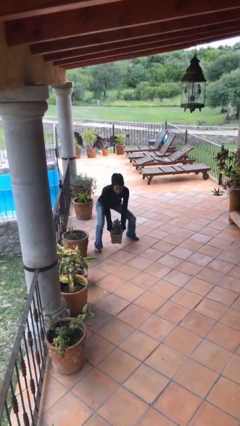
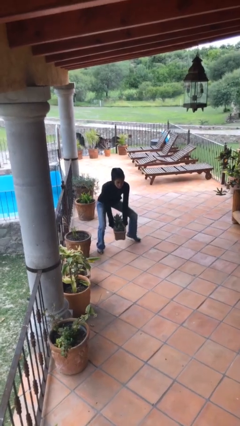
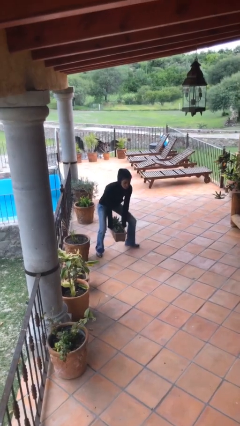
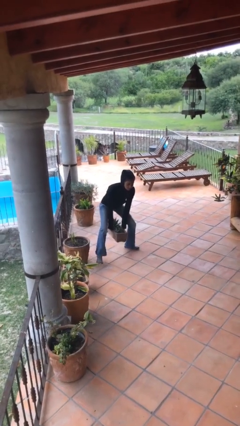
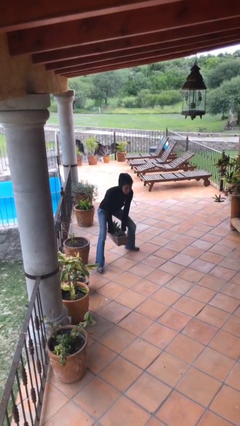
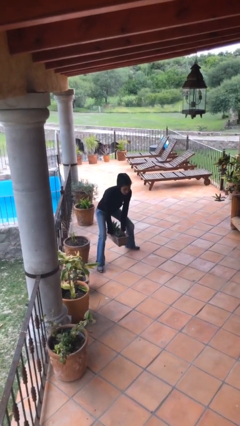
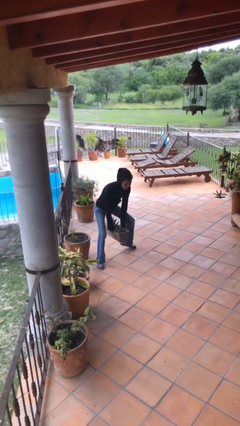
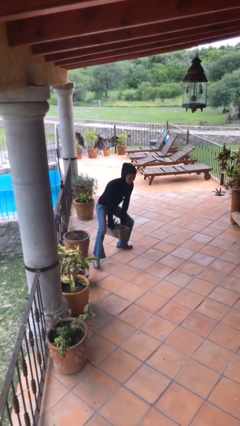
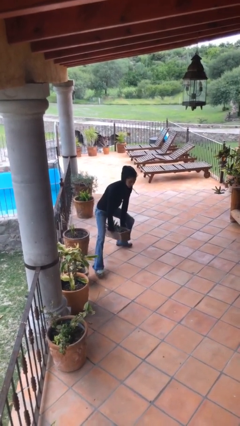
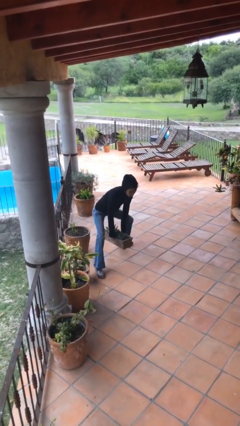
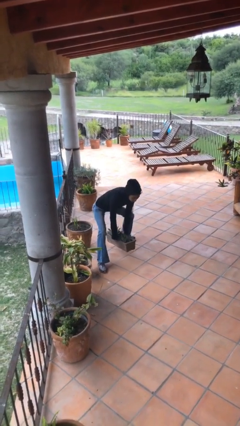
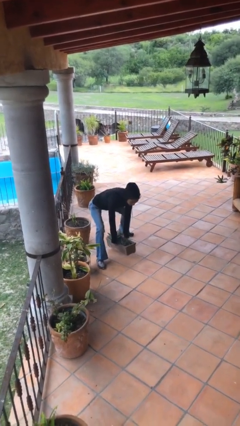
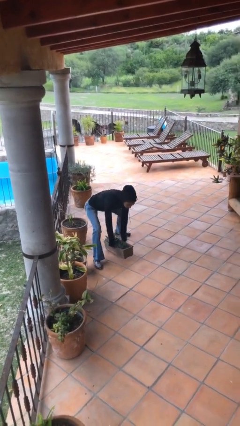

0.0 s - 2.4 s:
person carries heavy object

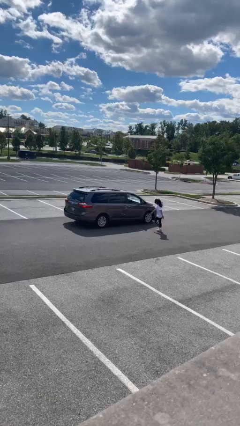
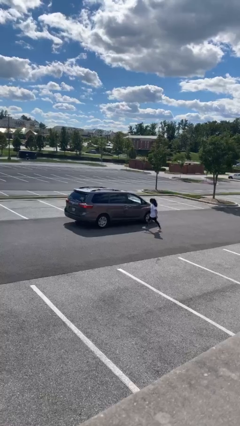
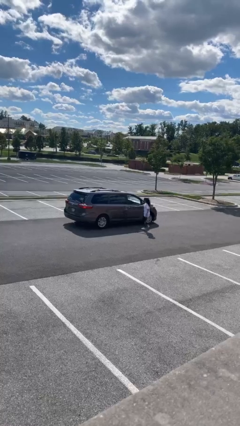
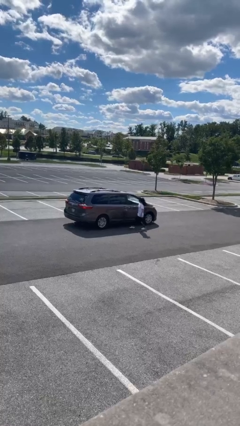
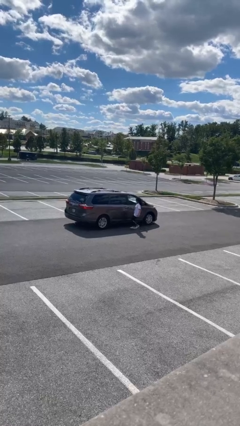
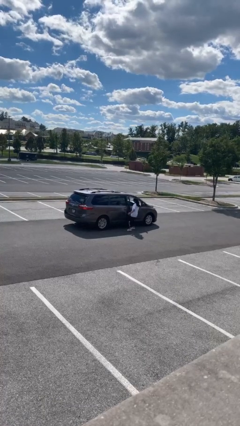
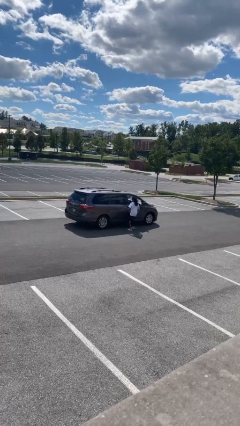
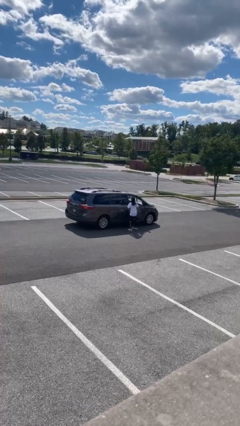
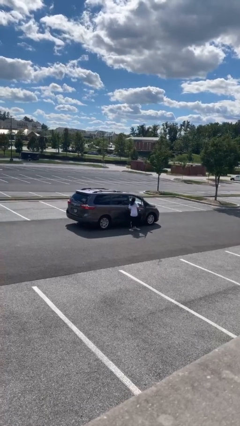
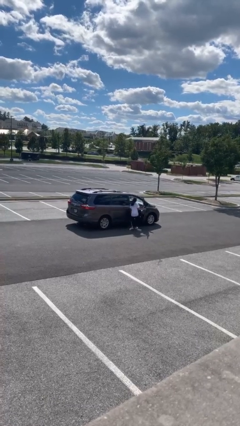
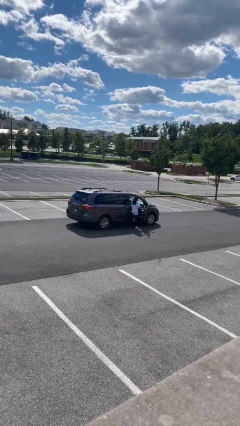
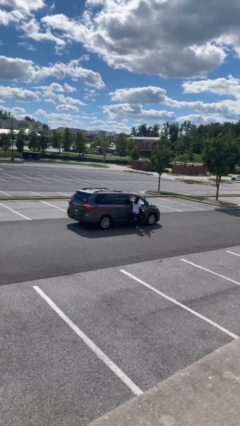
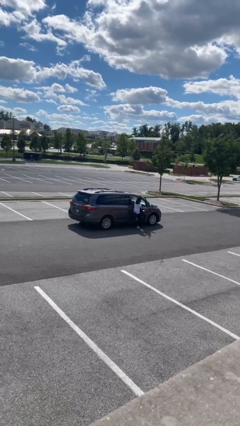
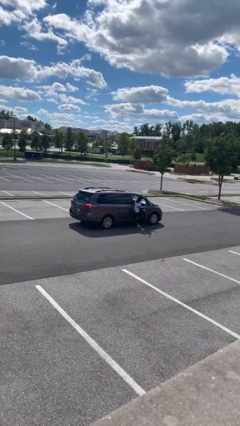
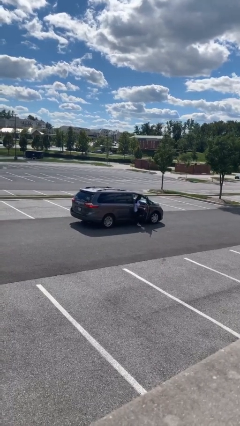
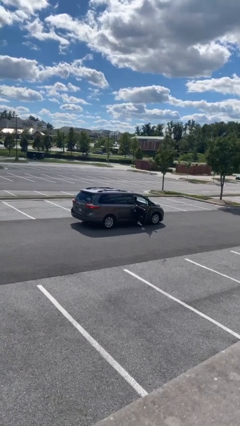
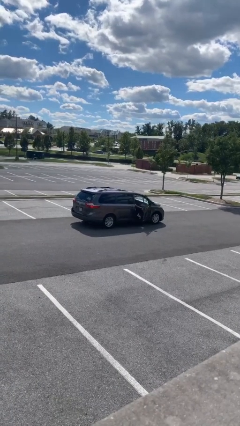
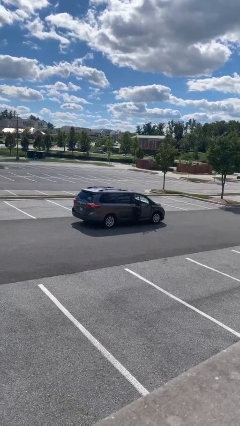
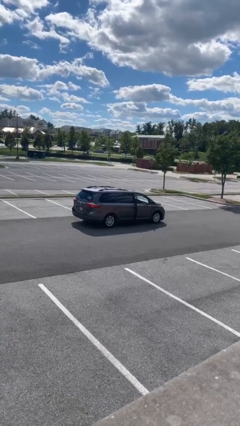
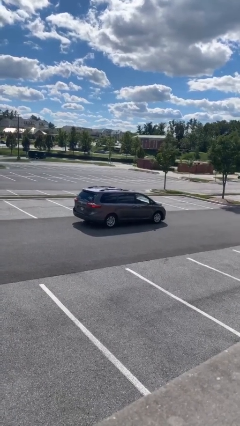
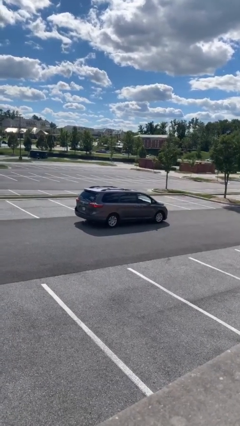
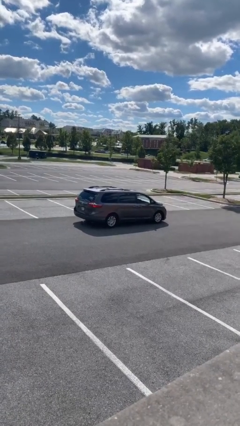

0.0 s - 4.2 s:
car picks up person

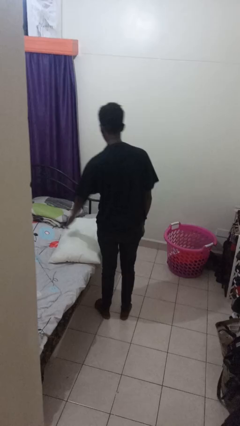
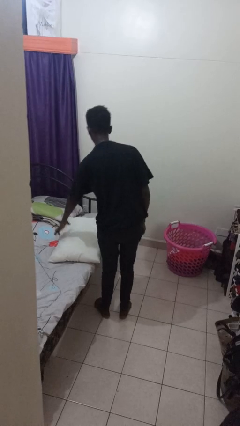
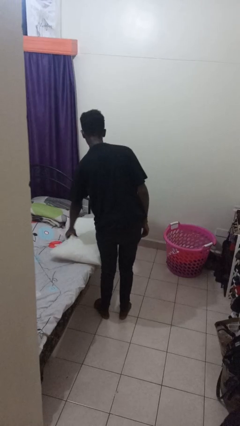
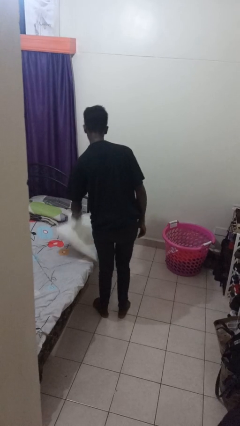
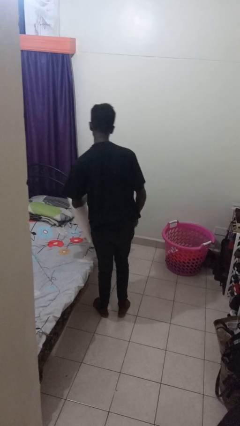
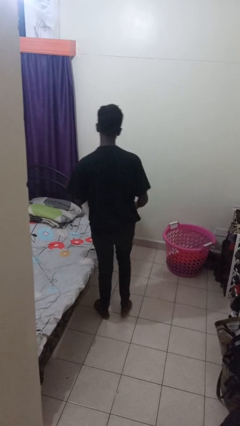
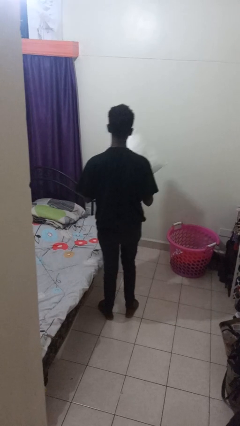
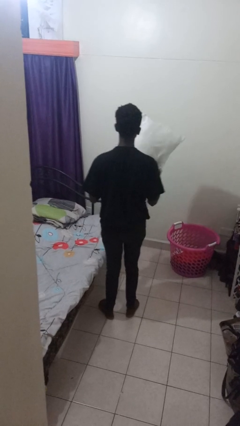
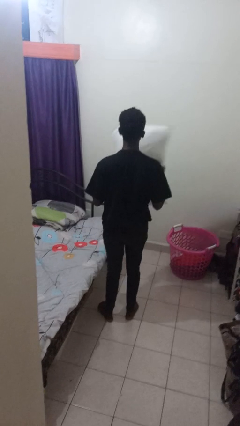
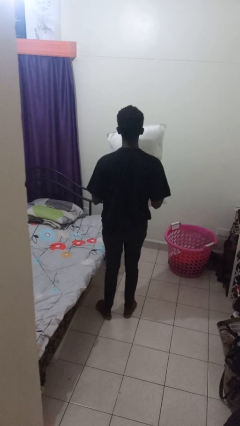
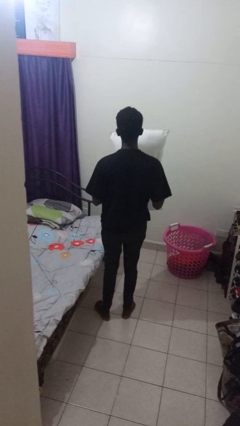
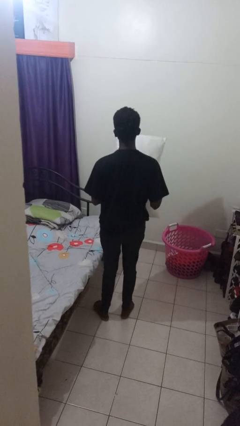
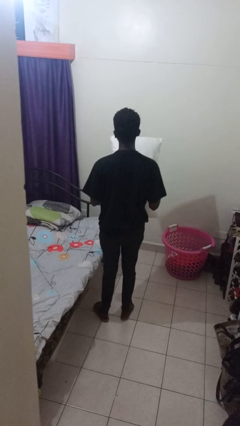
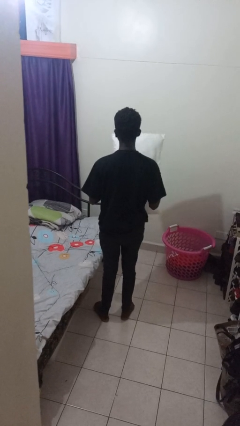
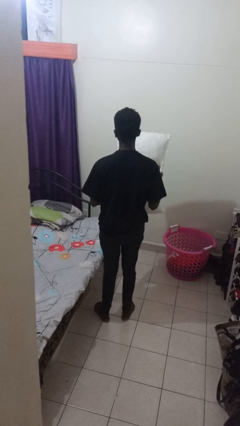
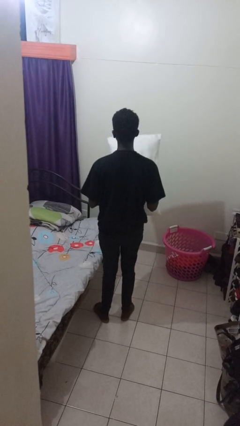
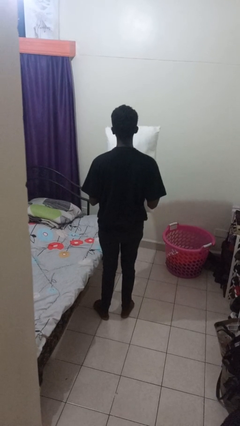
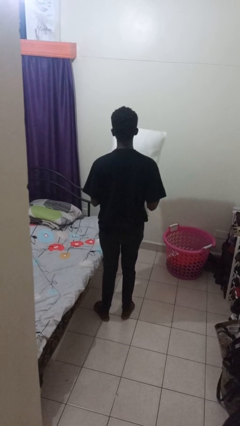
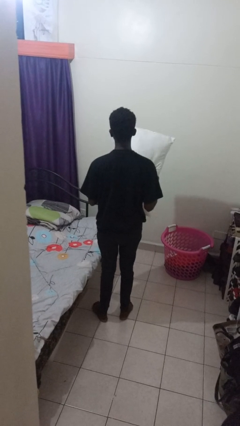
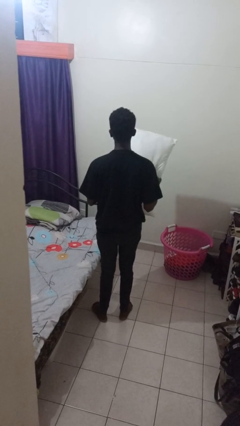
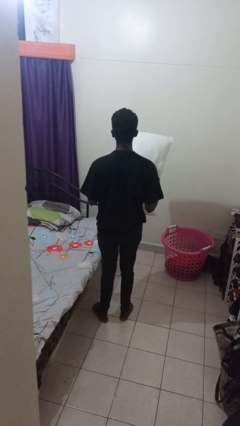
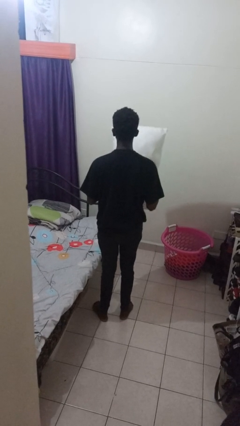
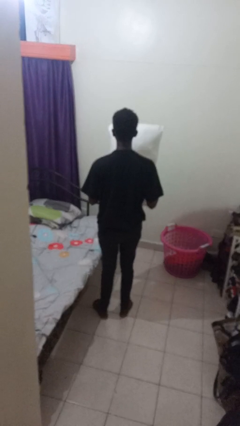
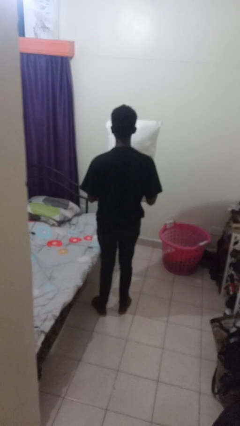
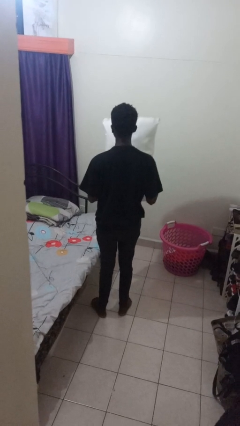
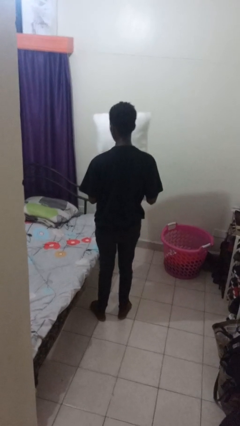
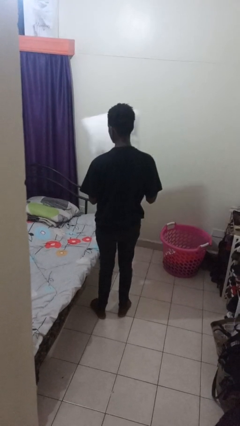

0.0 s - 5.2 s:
person picks up object from bed

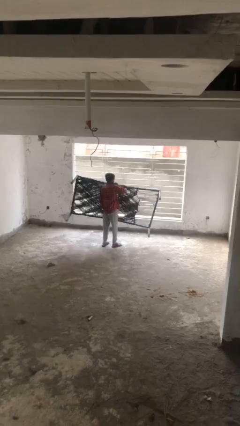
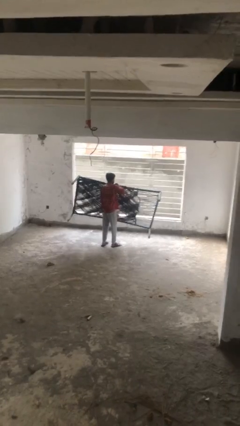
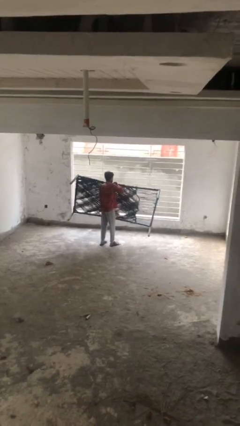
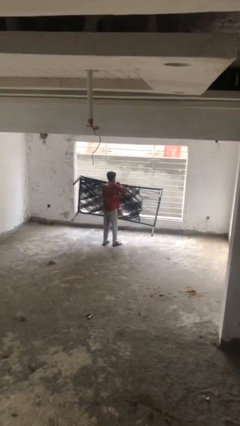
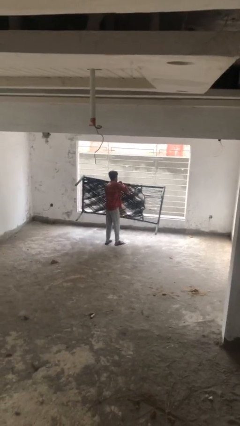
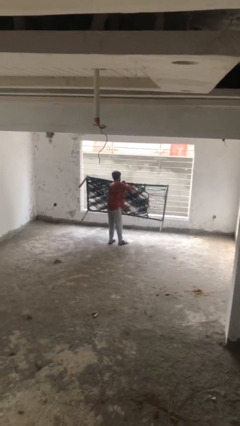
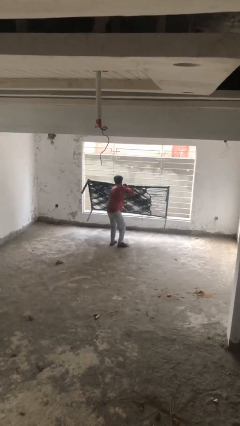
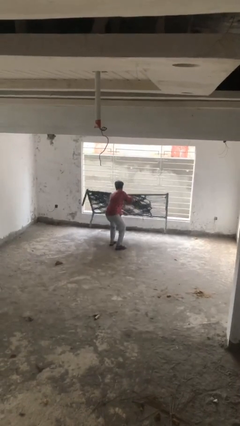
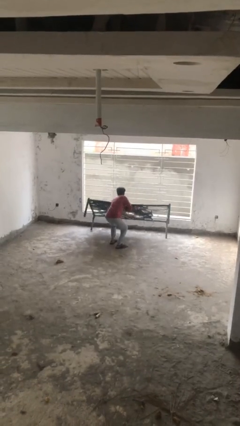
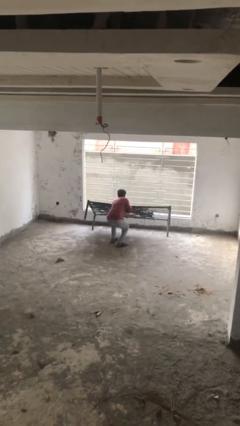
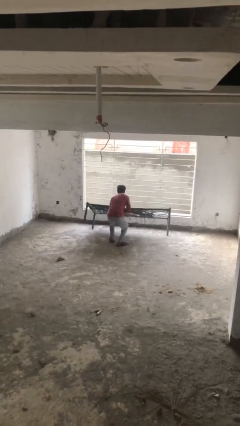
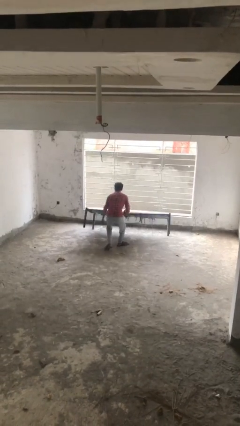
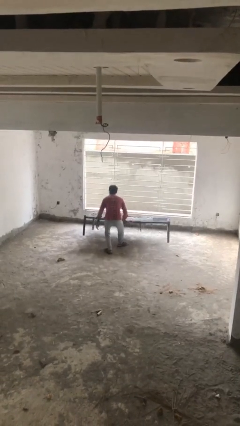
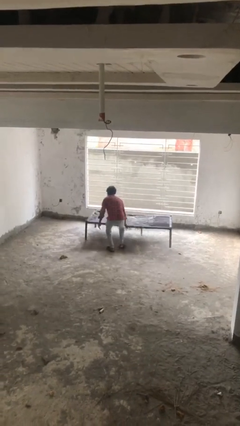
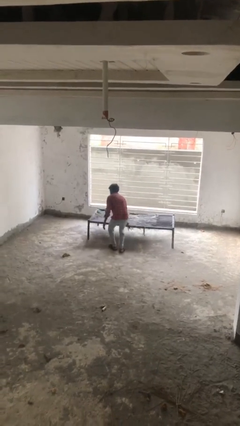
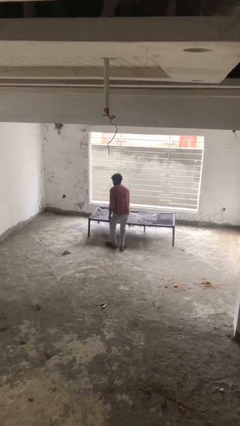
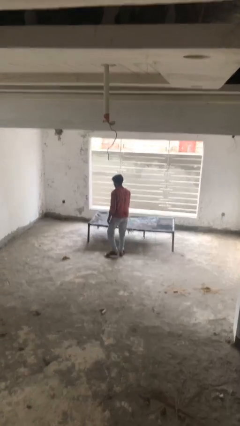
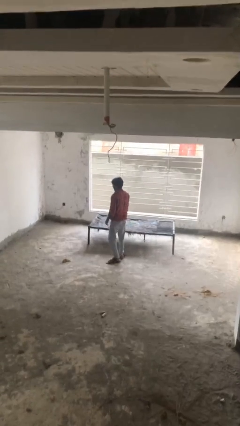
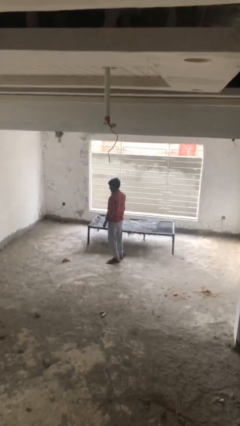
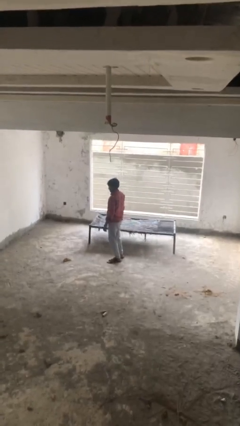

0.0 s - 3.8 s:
person puts down object on floor

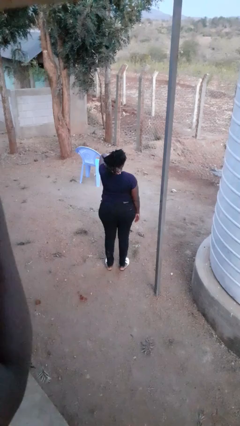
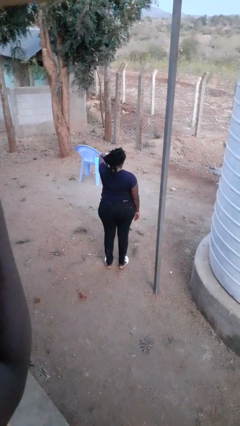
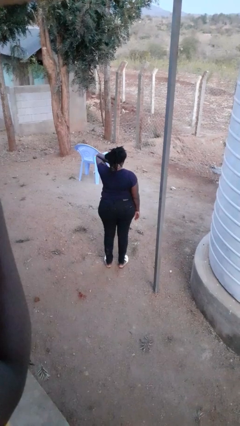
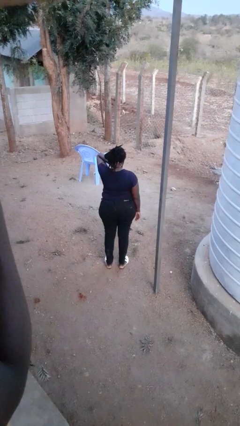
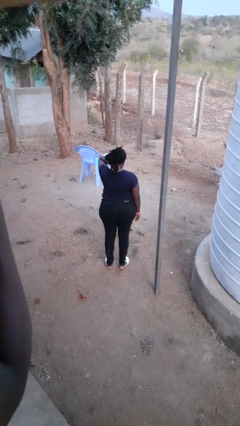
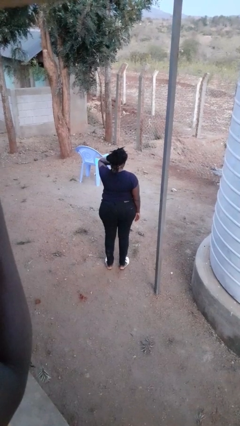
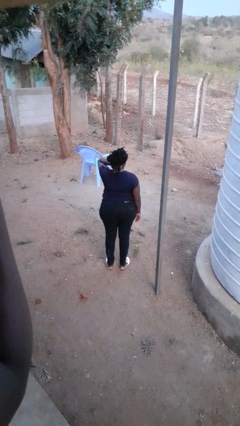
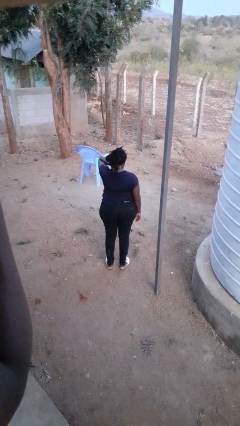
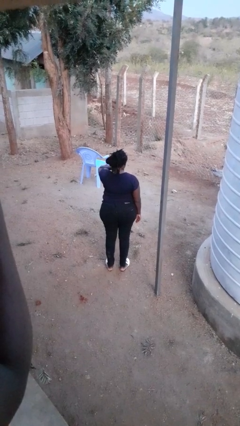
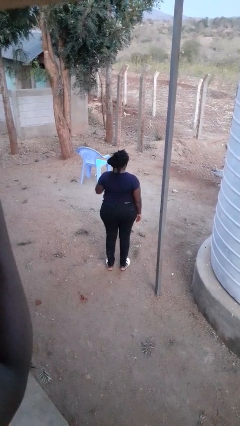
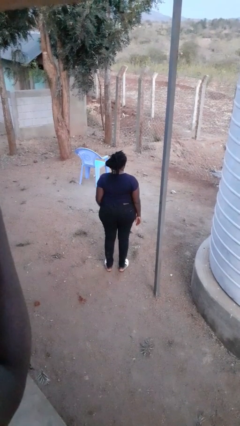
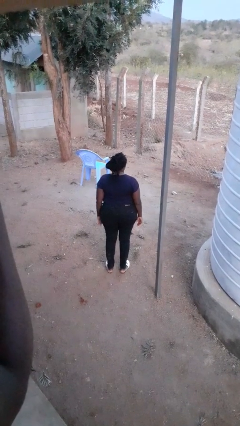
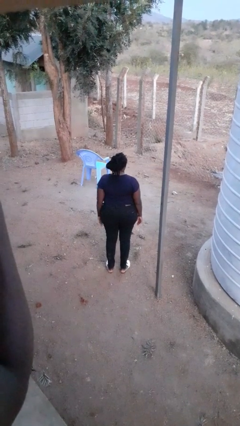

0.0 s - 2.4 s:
person rubs neck
